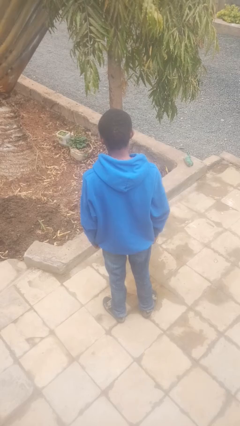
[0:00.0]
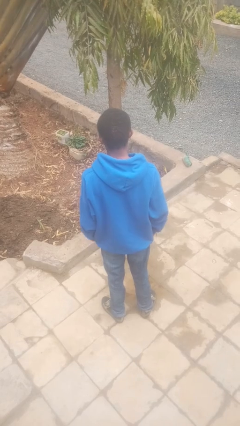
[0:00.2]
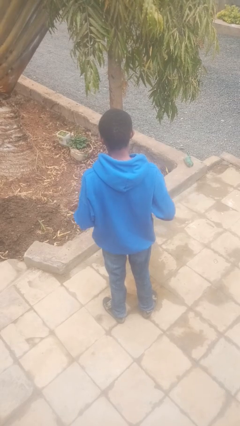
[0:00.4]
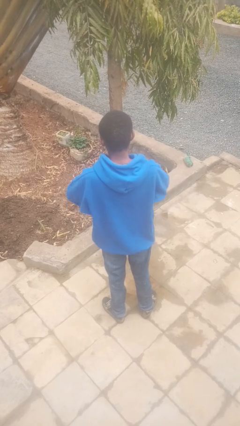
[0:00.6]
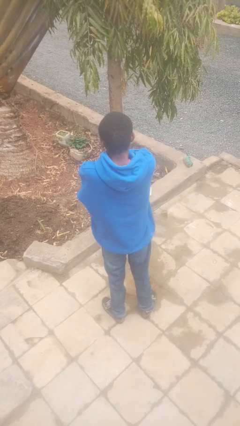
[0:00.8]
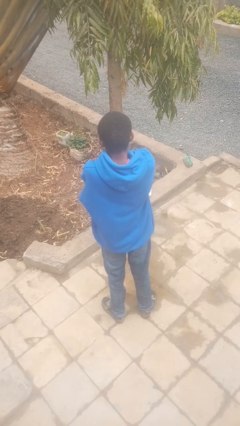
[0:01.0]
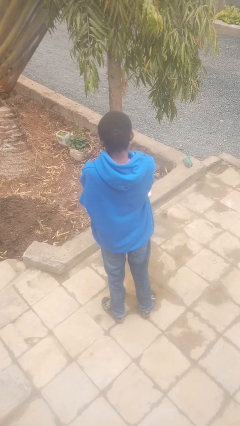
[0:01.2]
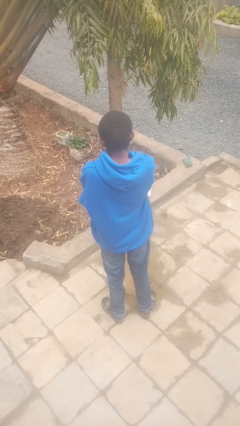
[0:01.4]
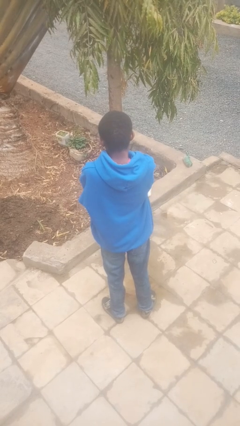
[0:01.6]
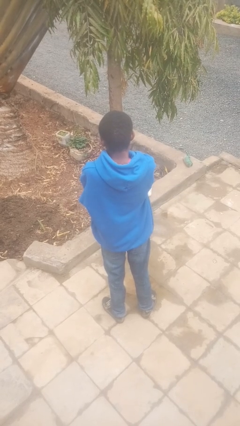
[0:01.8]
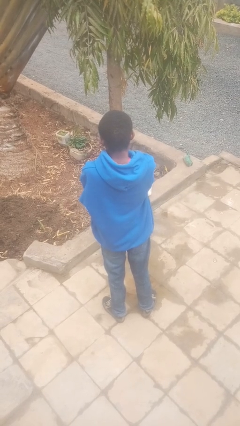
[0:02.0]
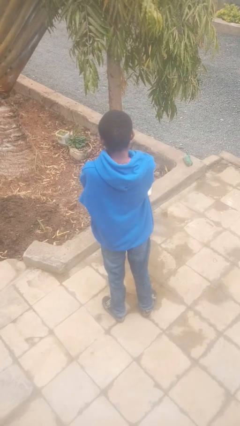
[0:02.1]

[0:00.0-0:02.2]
person crosses arms

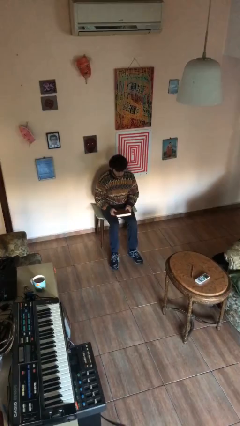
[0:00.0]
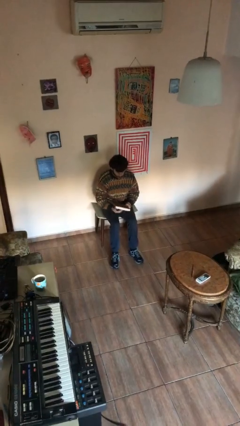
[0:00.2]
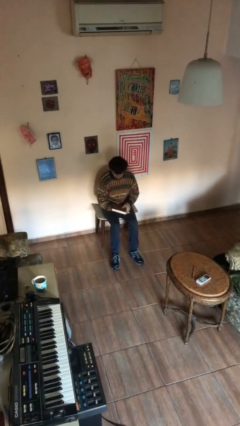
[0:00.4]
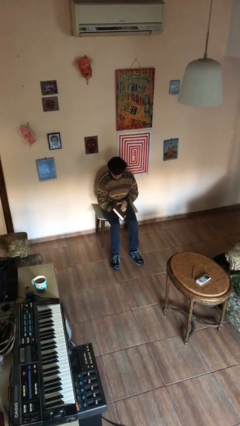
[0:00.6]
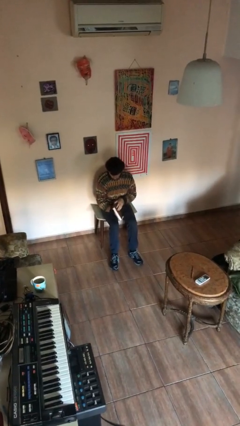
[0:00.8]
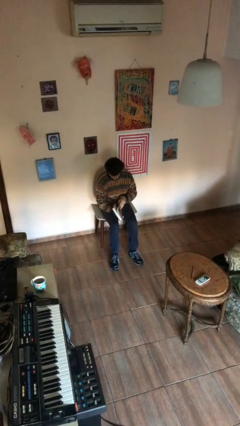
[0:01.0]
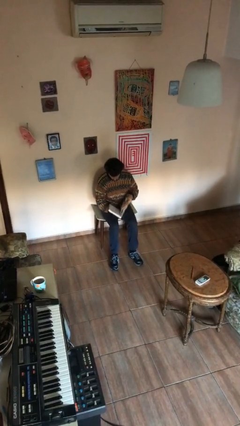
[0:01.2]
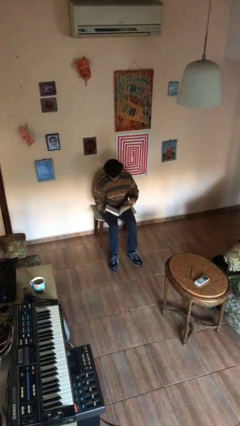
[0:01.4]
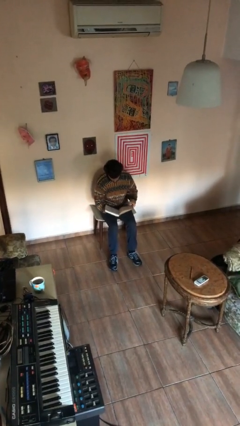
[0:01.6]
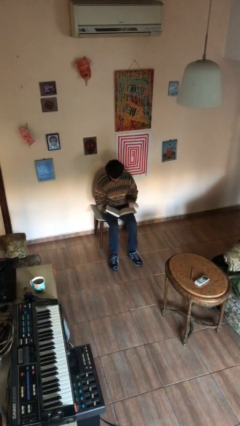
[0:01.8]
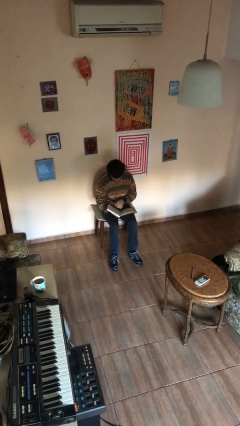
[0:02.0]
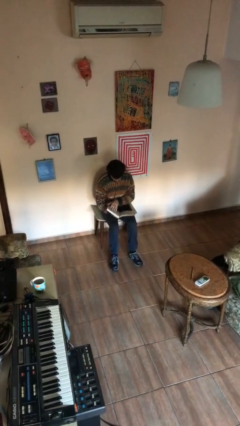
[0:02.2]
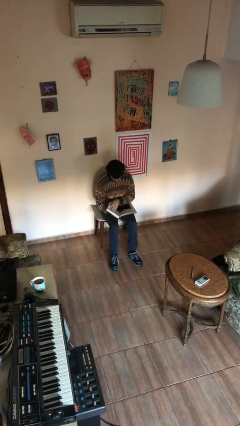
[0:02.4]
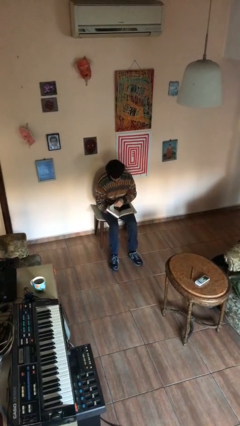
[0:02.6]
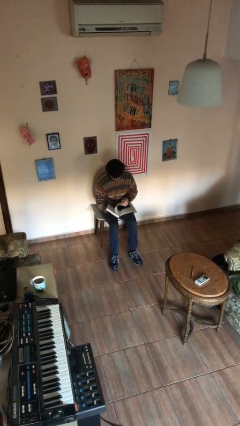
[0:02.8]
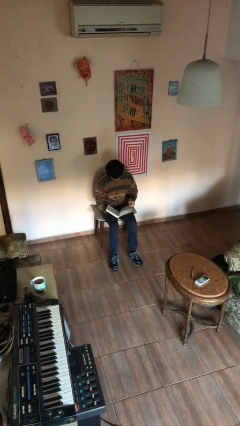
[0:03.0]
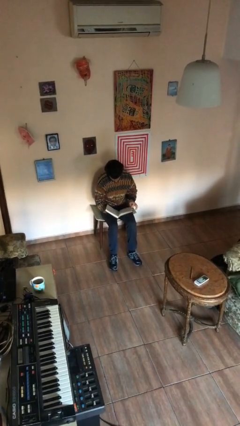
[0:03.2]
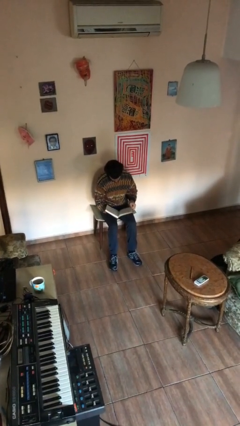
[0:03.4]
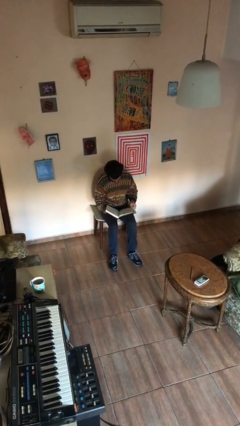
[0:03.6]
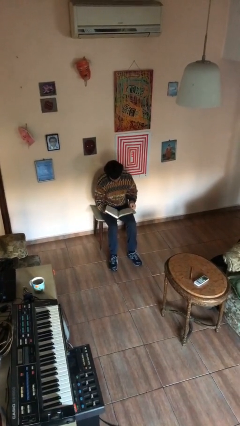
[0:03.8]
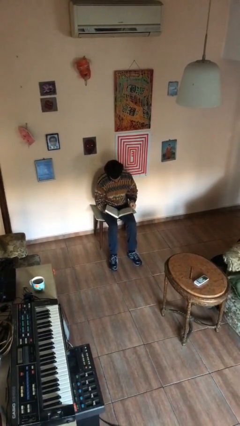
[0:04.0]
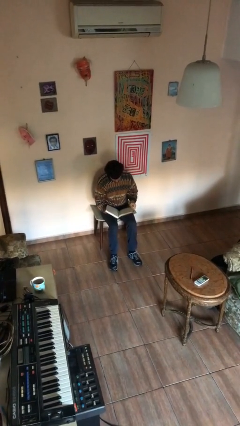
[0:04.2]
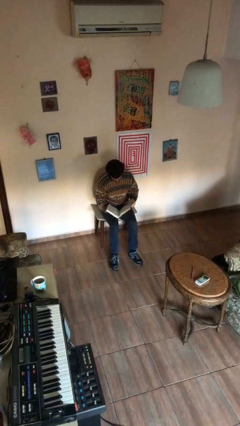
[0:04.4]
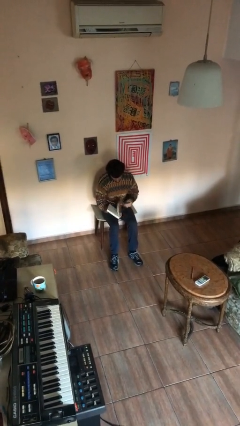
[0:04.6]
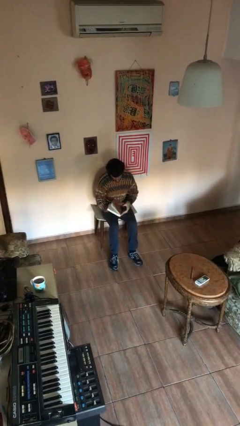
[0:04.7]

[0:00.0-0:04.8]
person reads book

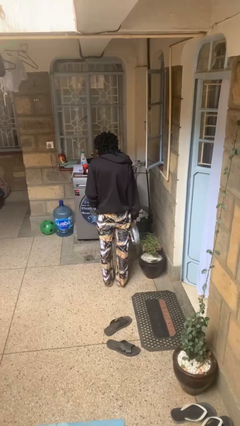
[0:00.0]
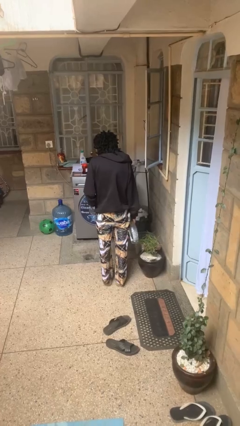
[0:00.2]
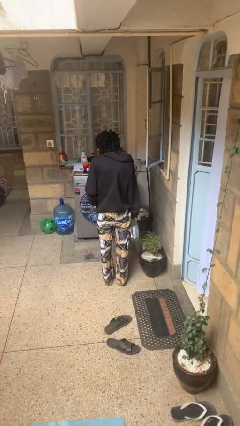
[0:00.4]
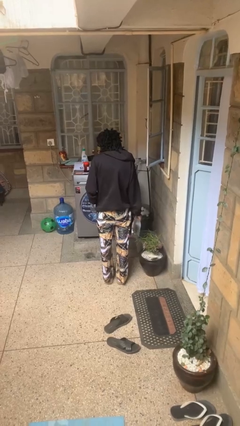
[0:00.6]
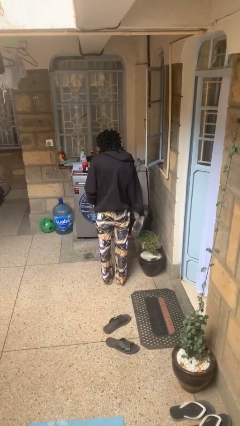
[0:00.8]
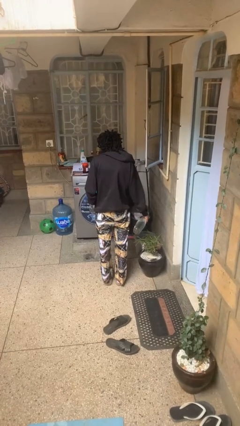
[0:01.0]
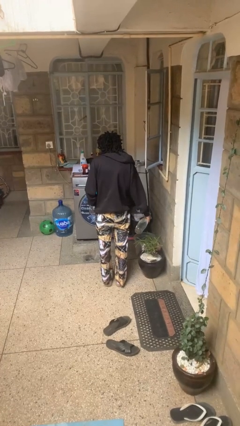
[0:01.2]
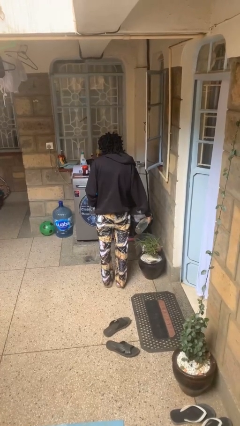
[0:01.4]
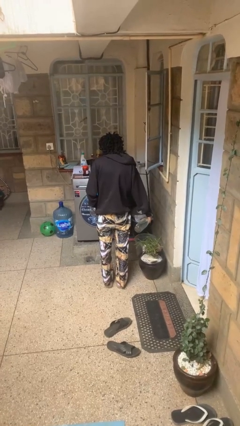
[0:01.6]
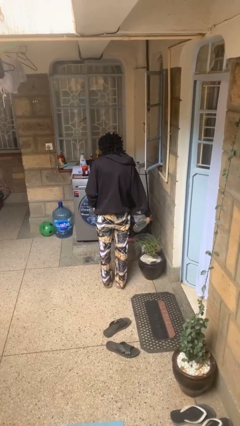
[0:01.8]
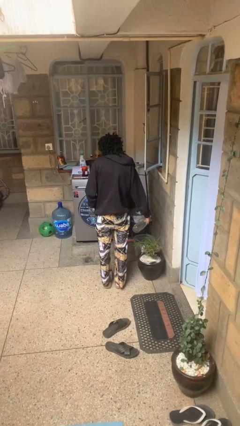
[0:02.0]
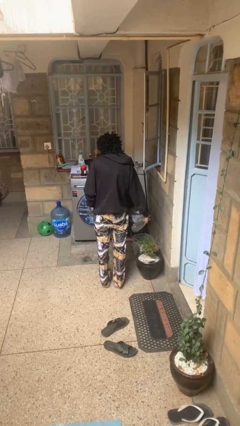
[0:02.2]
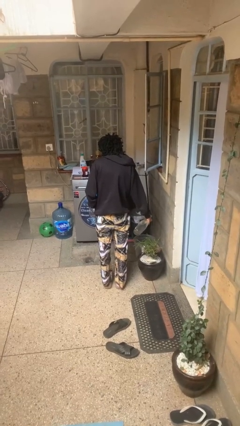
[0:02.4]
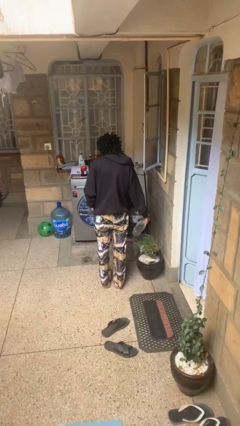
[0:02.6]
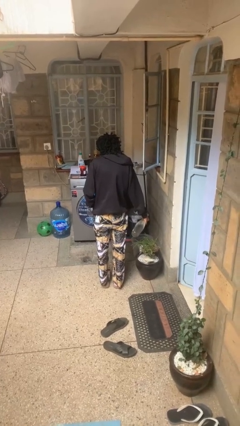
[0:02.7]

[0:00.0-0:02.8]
person waters houseplant

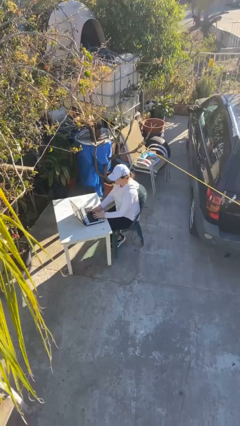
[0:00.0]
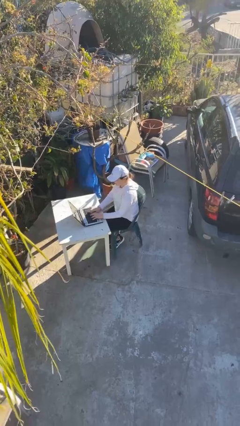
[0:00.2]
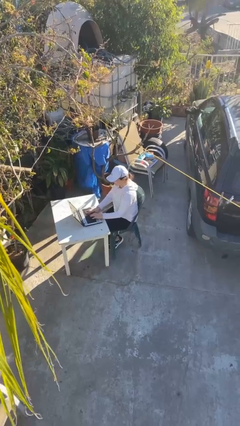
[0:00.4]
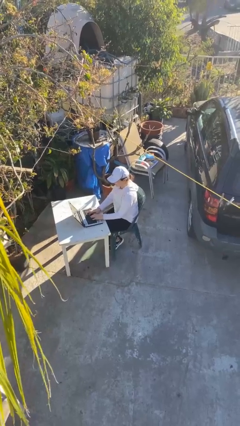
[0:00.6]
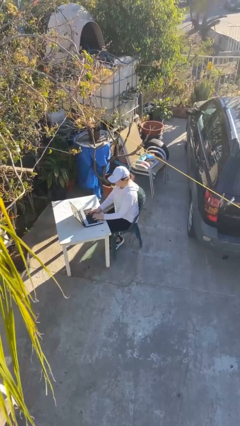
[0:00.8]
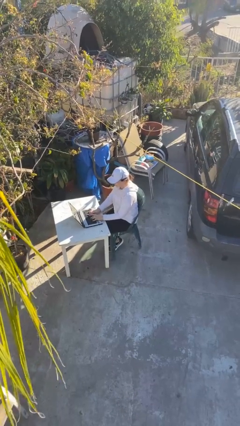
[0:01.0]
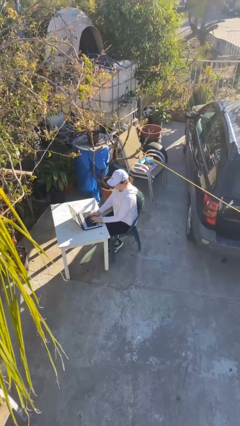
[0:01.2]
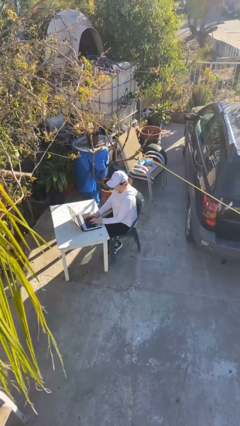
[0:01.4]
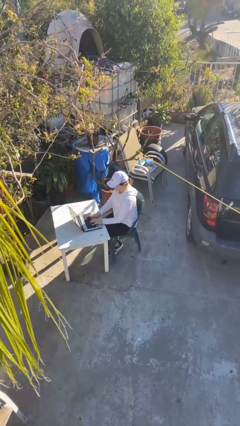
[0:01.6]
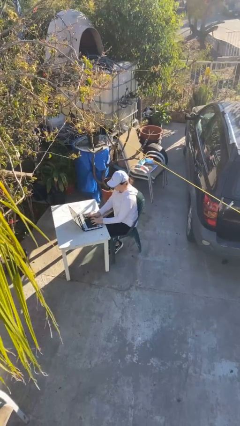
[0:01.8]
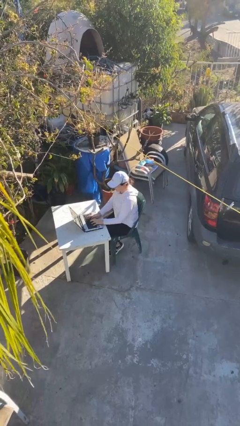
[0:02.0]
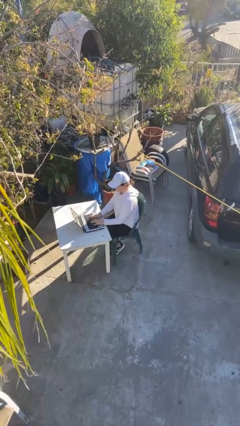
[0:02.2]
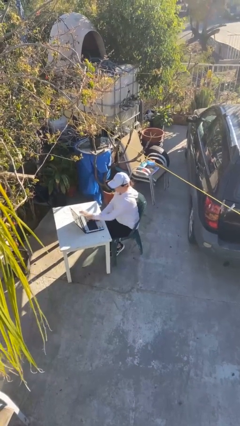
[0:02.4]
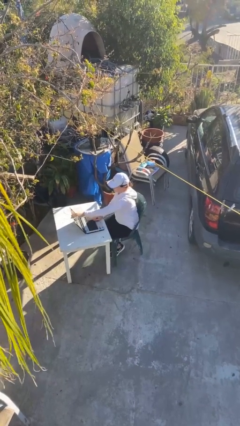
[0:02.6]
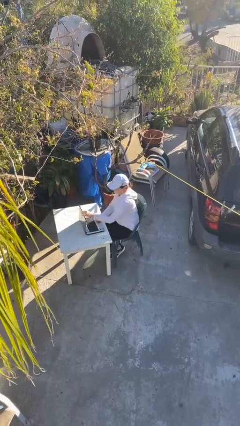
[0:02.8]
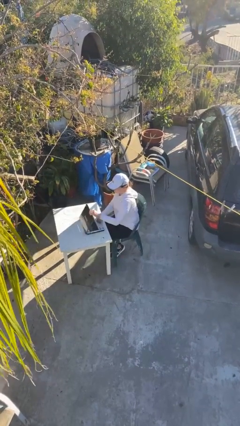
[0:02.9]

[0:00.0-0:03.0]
person interacts with laptop

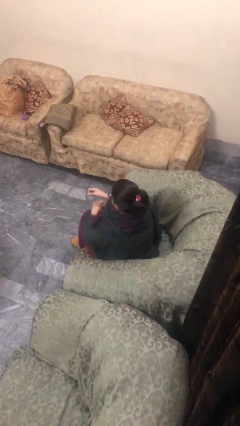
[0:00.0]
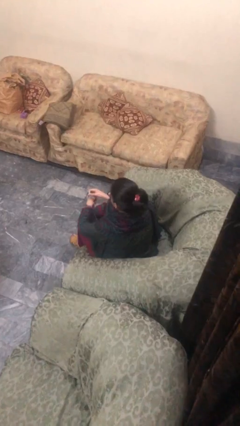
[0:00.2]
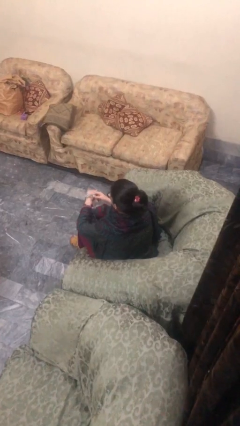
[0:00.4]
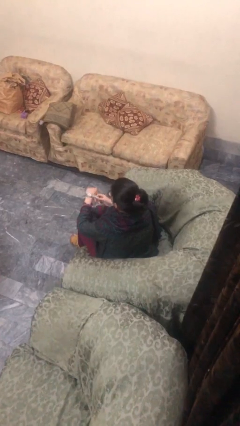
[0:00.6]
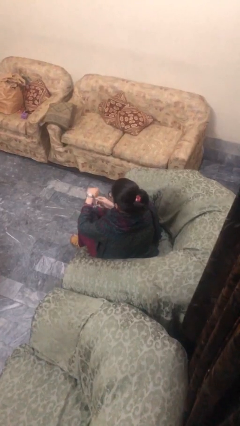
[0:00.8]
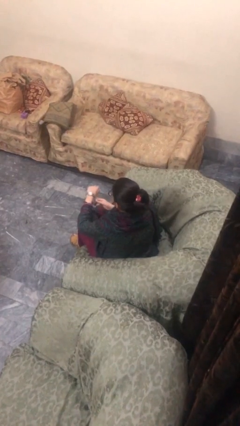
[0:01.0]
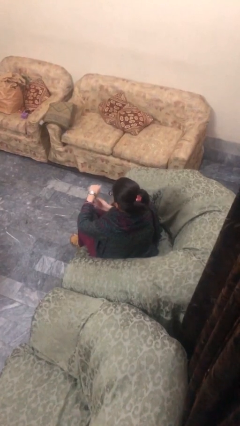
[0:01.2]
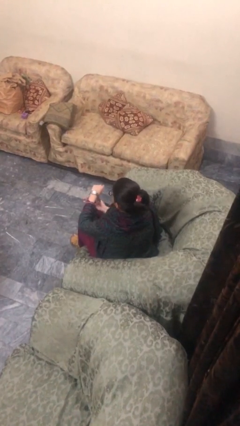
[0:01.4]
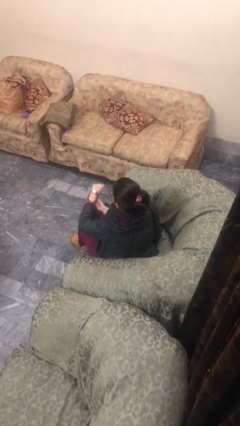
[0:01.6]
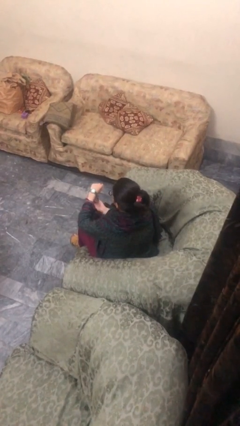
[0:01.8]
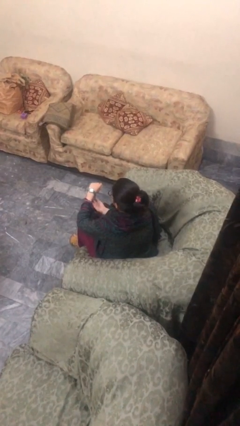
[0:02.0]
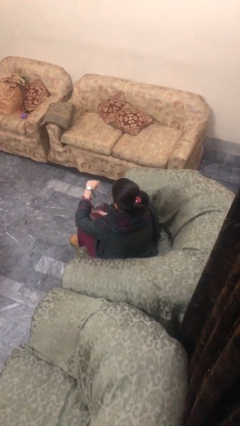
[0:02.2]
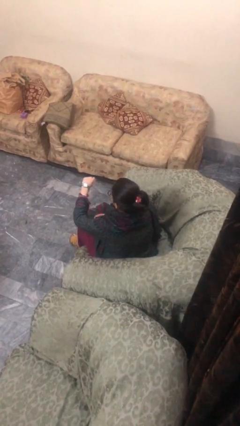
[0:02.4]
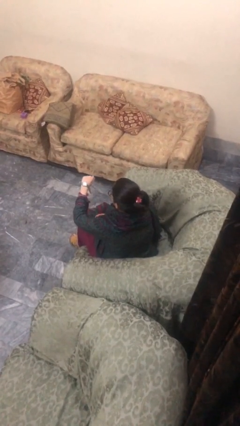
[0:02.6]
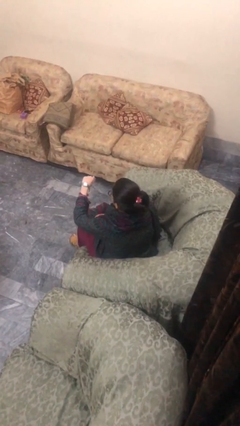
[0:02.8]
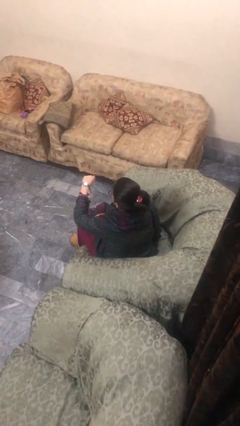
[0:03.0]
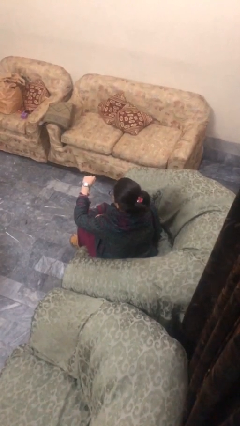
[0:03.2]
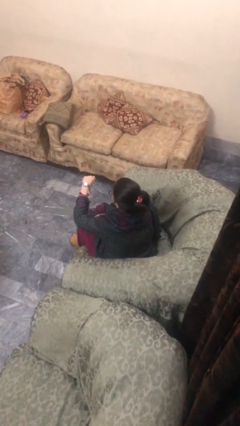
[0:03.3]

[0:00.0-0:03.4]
person puts on wristwatch

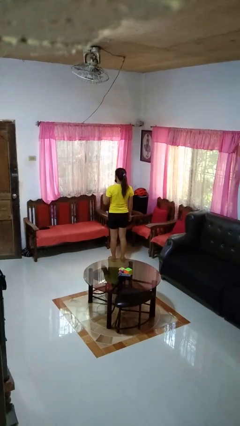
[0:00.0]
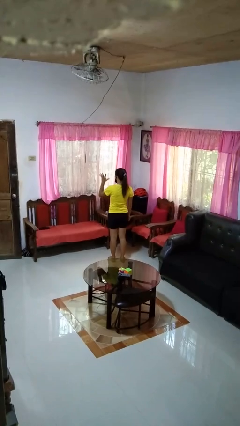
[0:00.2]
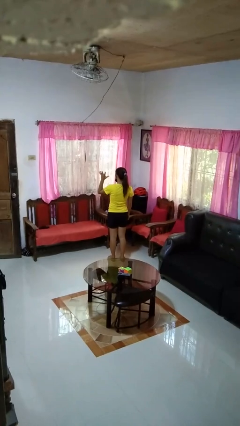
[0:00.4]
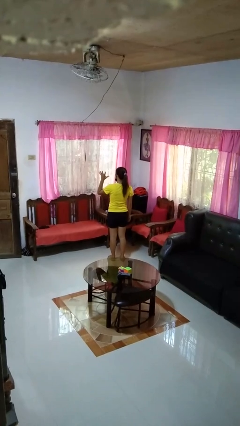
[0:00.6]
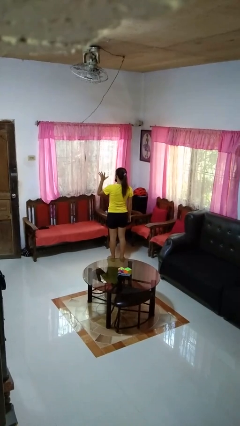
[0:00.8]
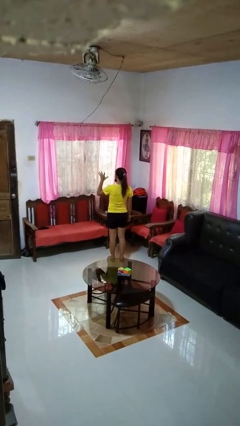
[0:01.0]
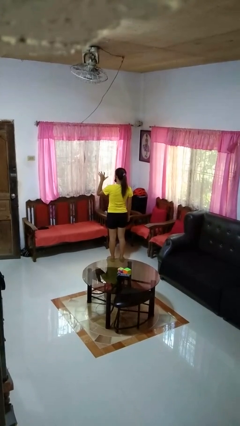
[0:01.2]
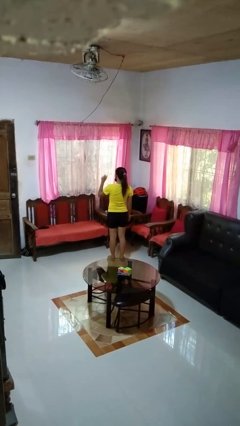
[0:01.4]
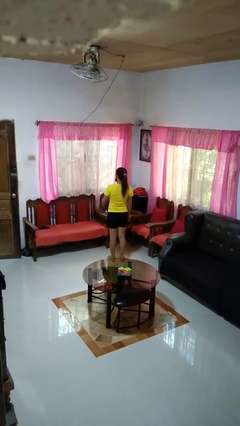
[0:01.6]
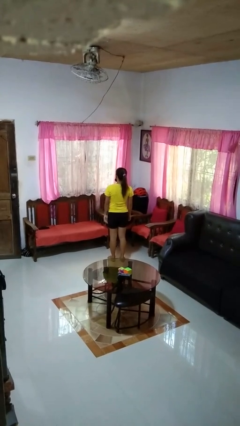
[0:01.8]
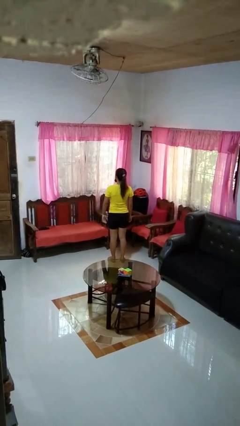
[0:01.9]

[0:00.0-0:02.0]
person gestures number five
